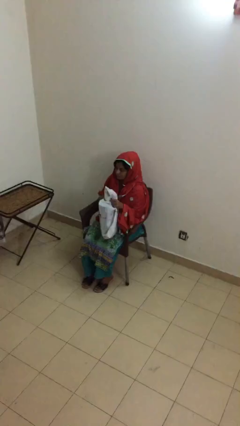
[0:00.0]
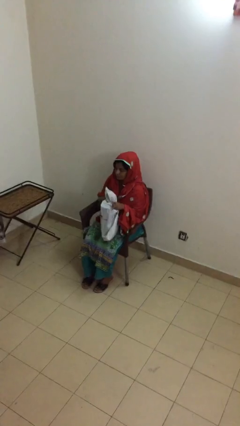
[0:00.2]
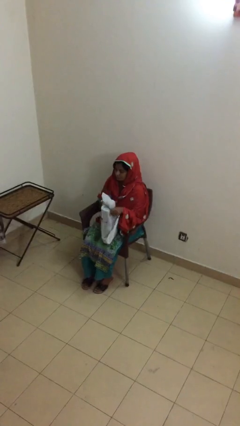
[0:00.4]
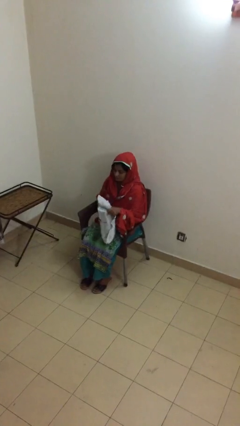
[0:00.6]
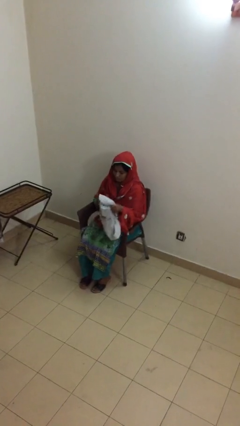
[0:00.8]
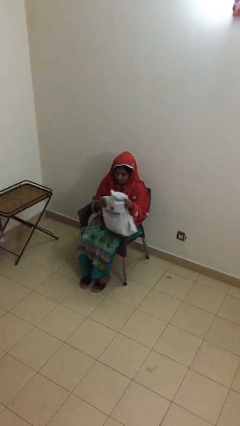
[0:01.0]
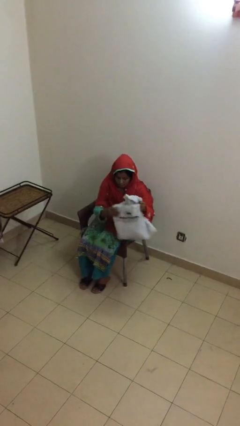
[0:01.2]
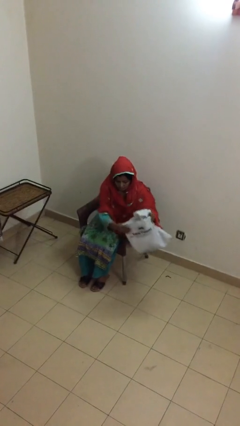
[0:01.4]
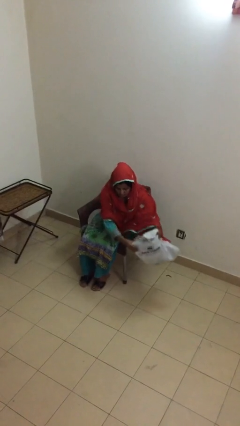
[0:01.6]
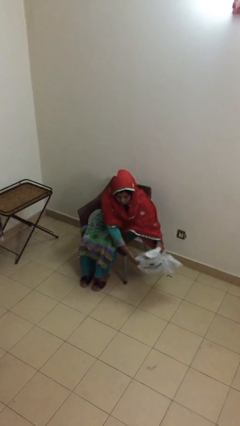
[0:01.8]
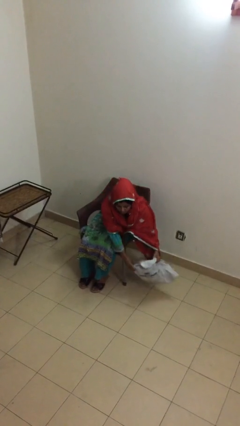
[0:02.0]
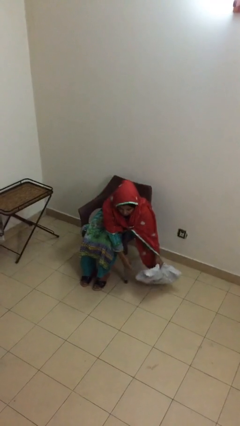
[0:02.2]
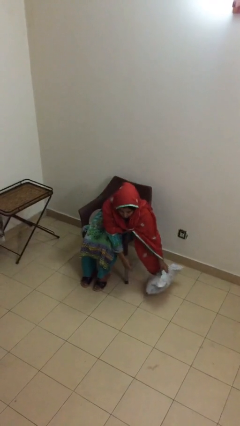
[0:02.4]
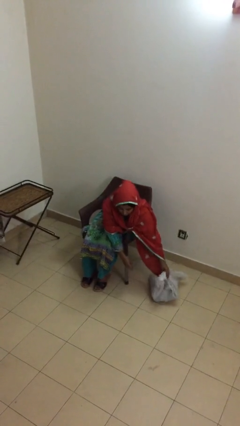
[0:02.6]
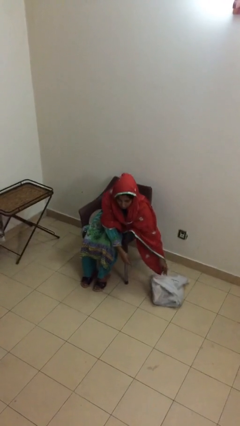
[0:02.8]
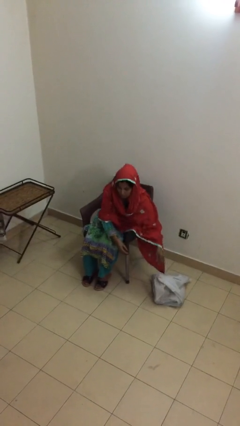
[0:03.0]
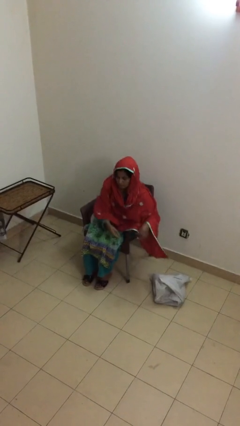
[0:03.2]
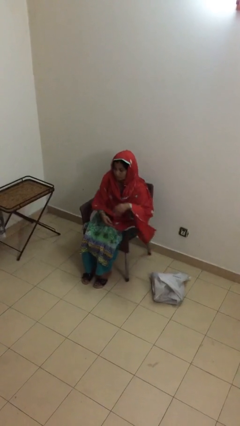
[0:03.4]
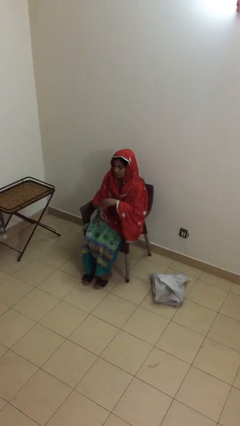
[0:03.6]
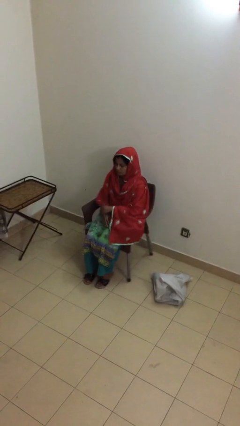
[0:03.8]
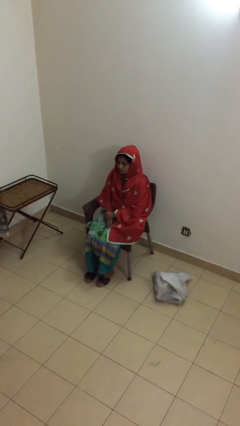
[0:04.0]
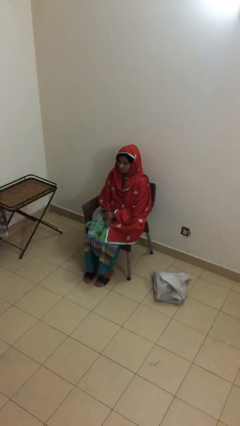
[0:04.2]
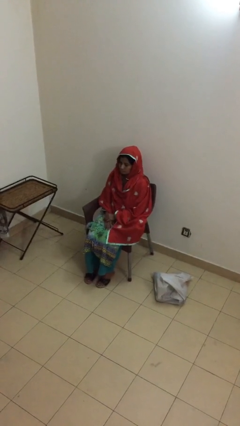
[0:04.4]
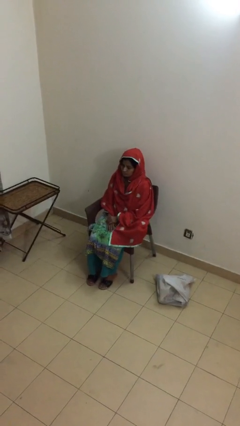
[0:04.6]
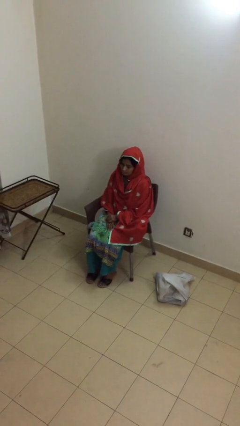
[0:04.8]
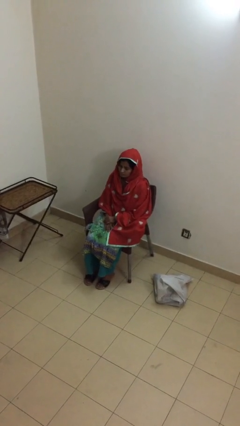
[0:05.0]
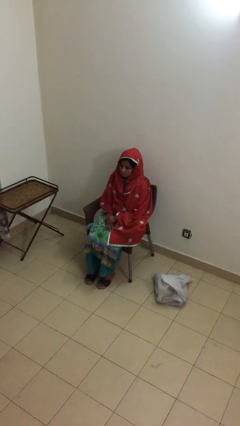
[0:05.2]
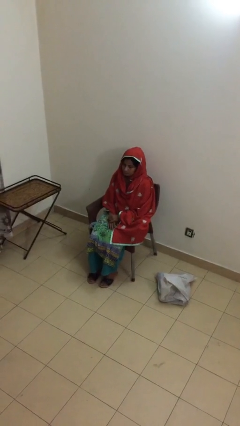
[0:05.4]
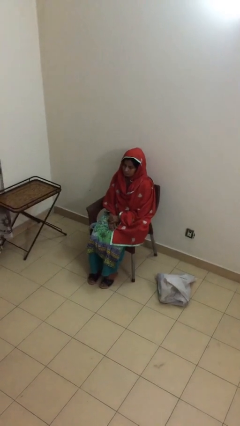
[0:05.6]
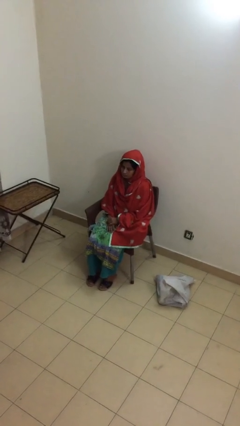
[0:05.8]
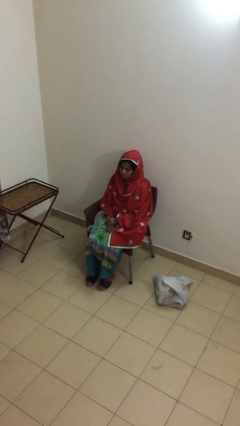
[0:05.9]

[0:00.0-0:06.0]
person puts down object on floor

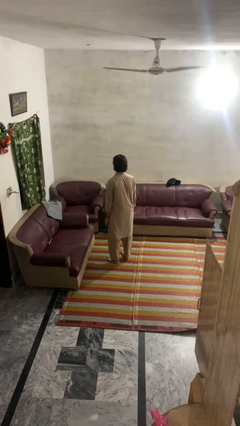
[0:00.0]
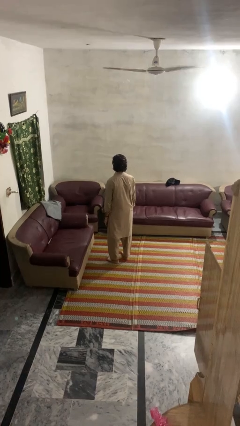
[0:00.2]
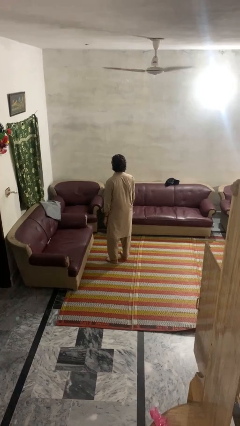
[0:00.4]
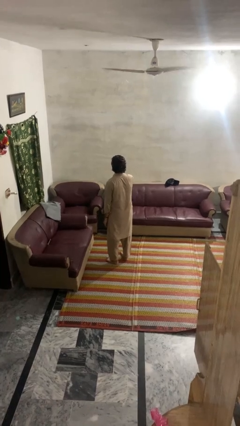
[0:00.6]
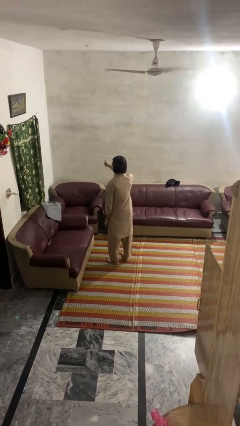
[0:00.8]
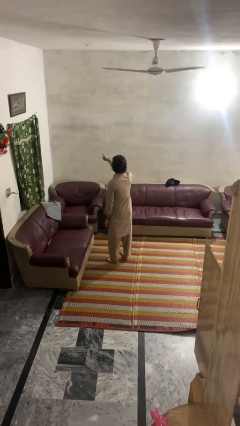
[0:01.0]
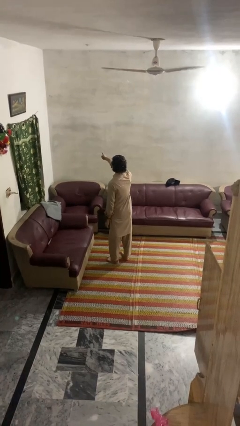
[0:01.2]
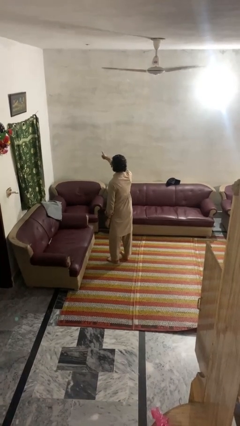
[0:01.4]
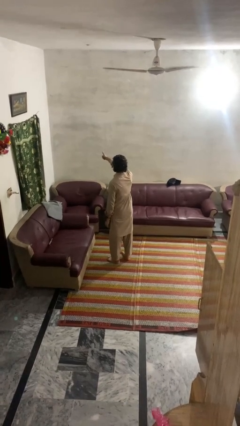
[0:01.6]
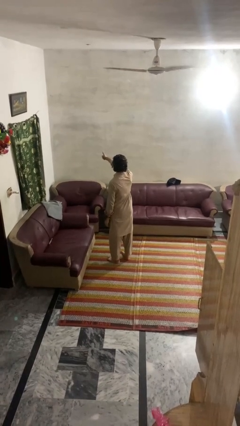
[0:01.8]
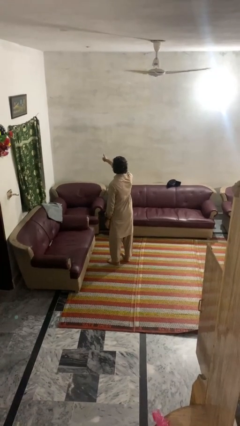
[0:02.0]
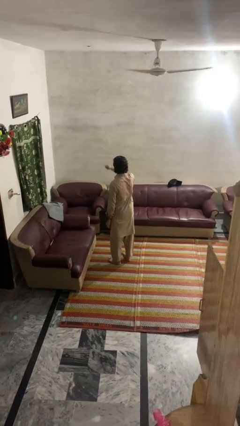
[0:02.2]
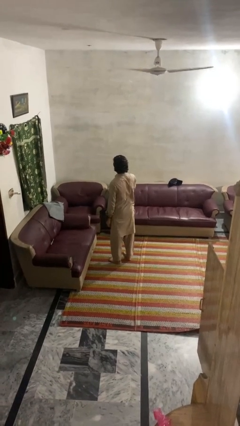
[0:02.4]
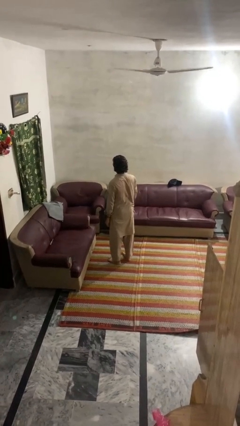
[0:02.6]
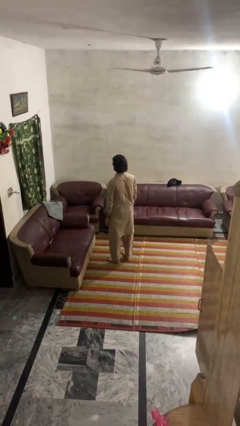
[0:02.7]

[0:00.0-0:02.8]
person gestures thumbs up

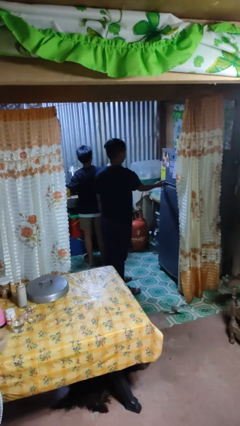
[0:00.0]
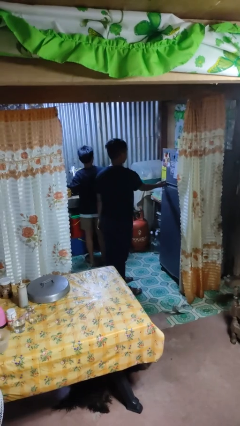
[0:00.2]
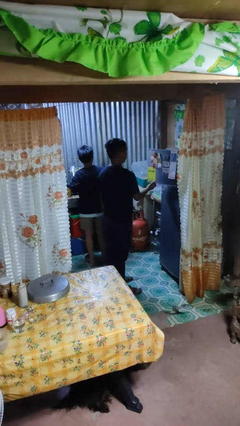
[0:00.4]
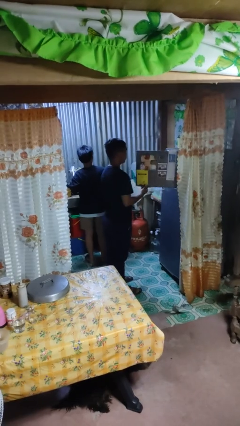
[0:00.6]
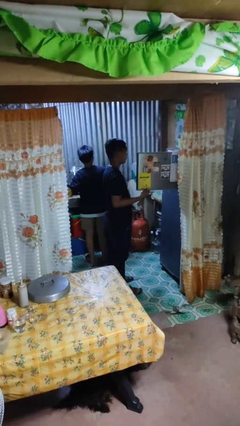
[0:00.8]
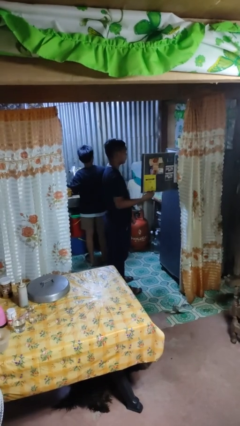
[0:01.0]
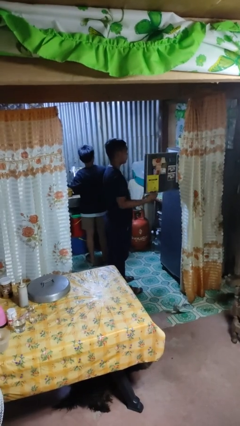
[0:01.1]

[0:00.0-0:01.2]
person opens refrigerator

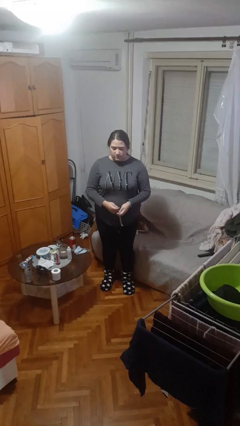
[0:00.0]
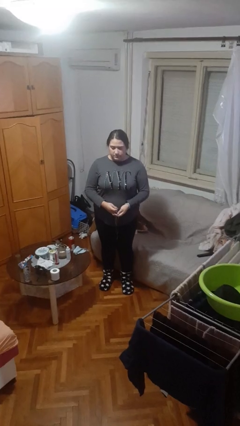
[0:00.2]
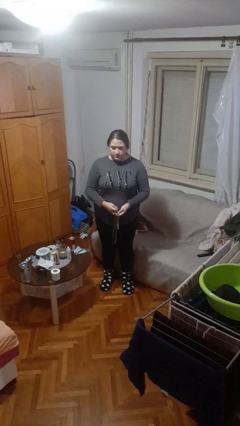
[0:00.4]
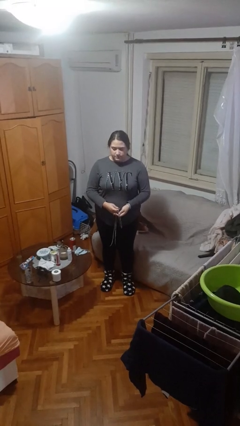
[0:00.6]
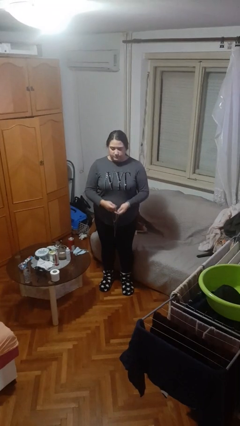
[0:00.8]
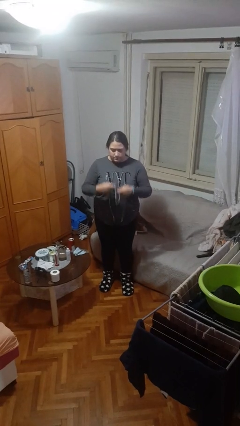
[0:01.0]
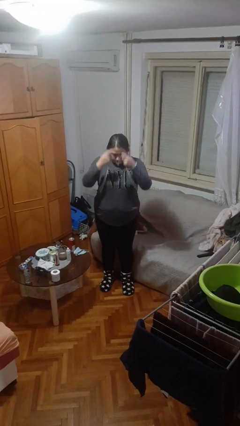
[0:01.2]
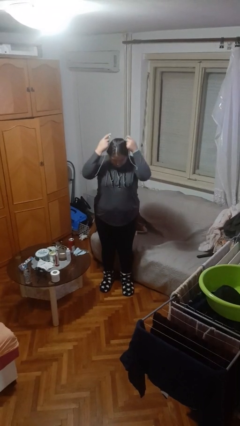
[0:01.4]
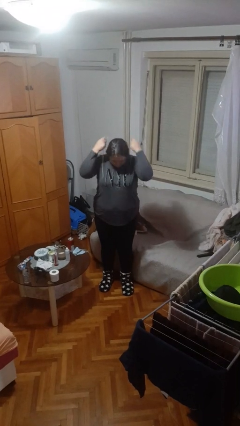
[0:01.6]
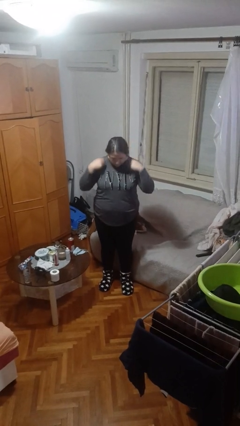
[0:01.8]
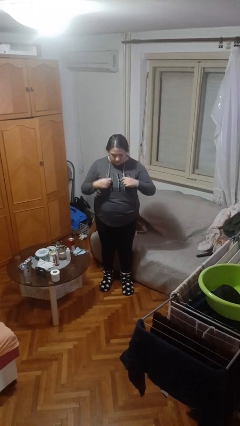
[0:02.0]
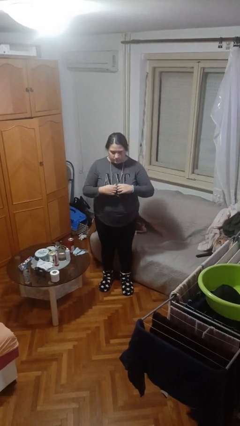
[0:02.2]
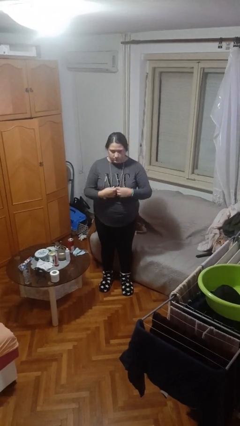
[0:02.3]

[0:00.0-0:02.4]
person puts on necklace

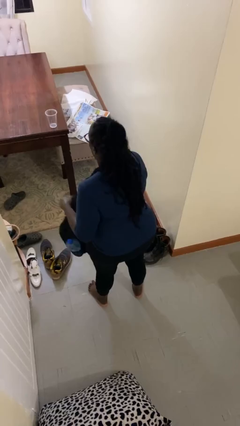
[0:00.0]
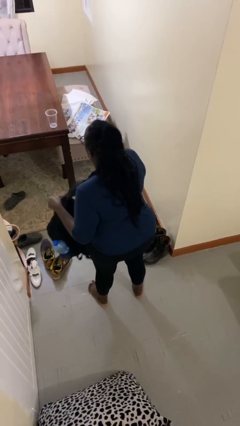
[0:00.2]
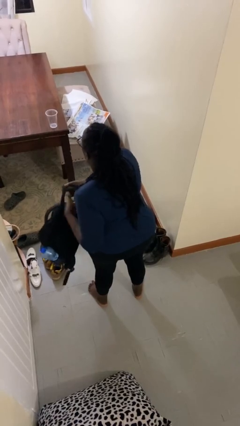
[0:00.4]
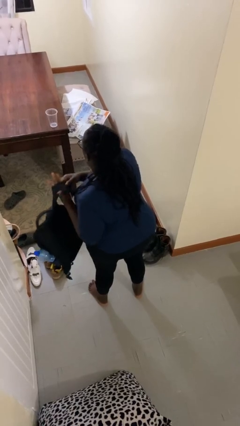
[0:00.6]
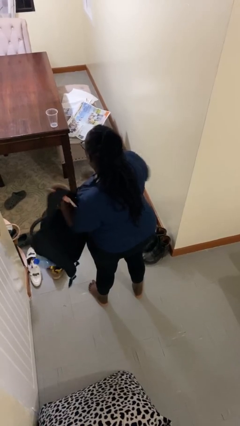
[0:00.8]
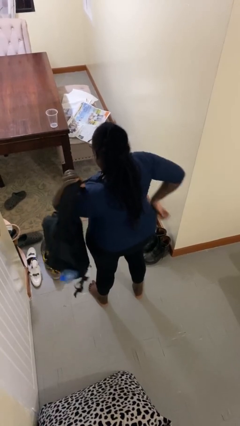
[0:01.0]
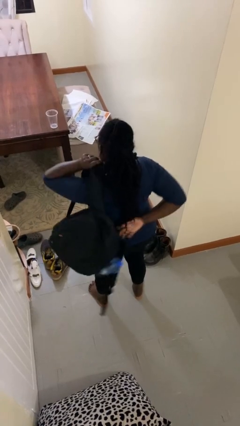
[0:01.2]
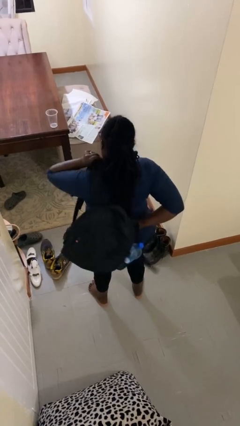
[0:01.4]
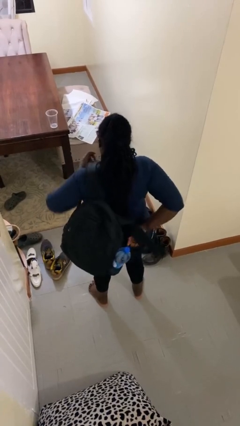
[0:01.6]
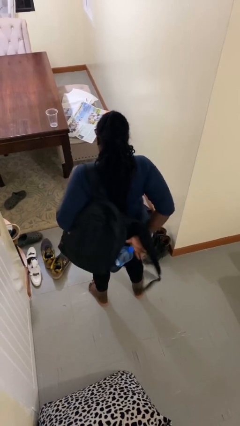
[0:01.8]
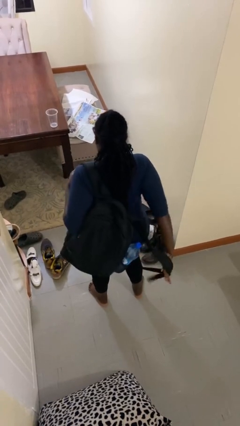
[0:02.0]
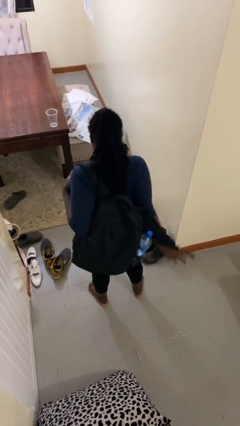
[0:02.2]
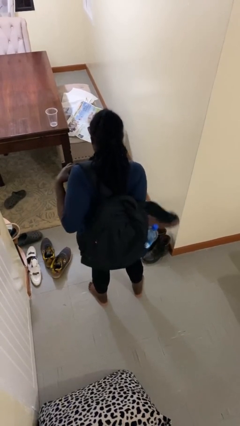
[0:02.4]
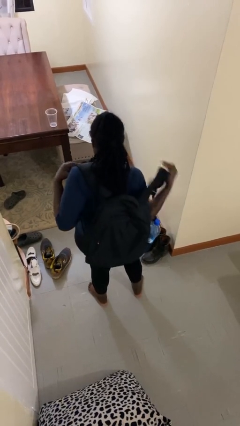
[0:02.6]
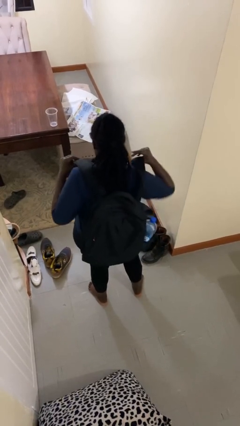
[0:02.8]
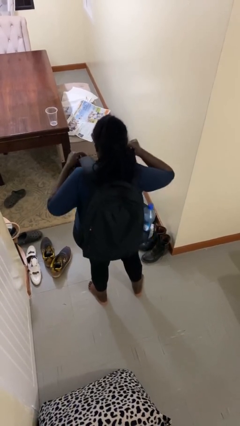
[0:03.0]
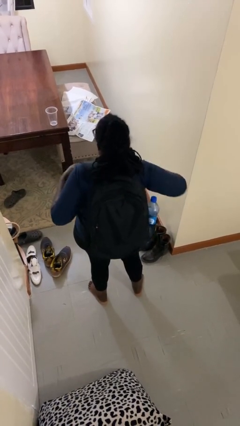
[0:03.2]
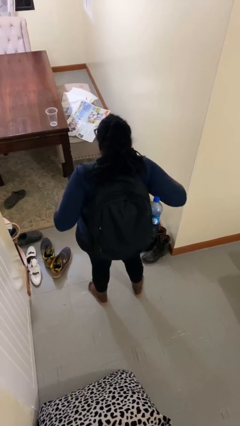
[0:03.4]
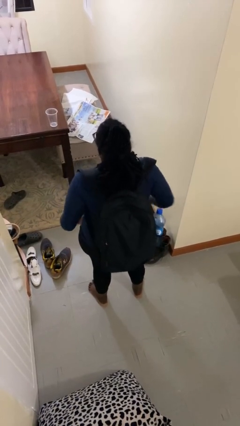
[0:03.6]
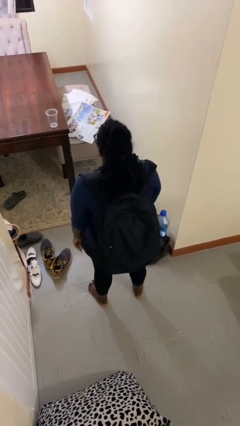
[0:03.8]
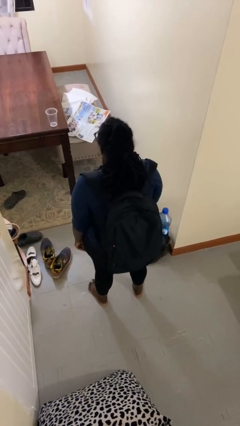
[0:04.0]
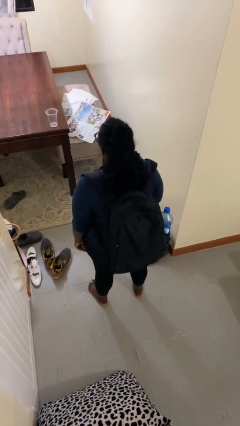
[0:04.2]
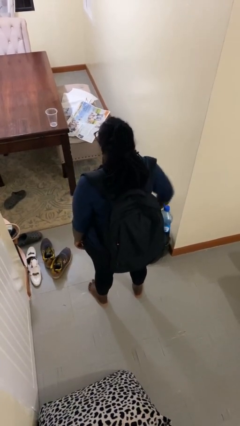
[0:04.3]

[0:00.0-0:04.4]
person puts on backpack

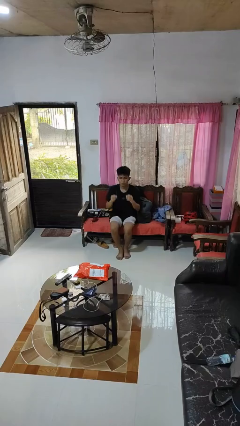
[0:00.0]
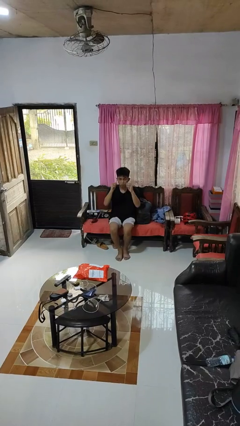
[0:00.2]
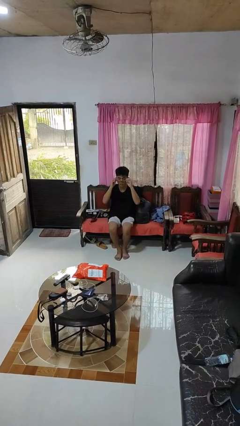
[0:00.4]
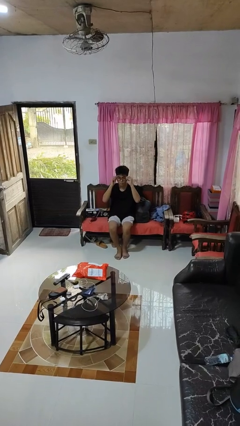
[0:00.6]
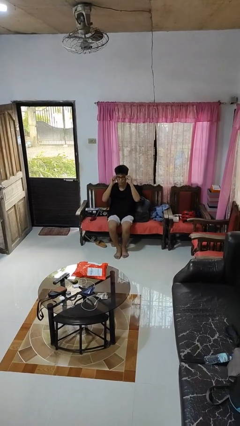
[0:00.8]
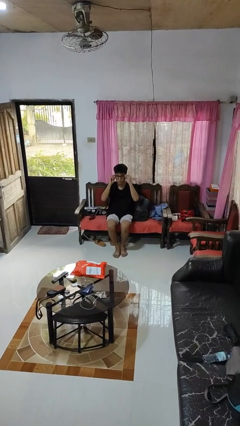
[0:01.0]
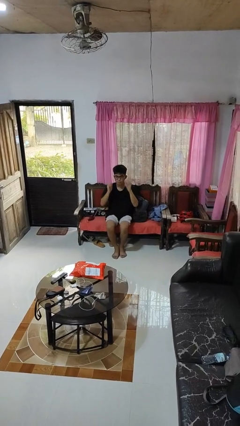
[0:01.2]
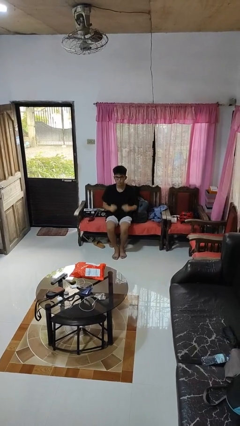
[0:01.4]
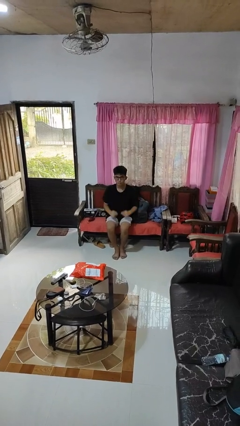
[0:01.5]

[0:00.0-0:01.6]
person puts on glasses
